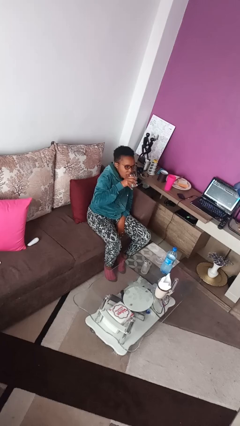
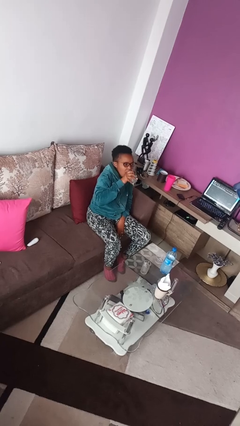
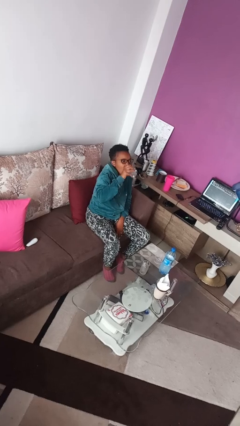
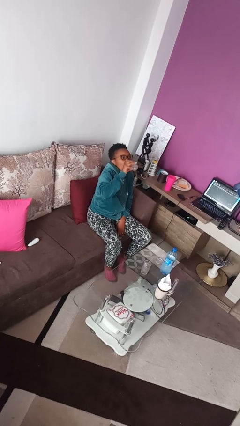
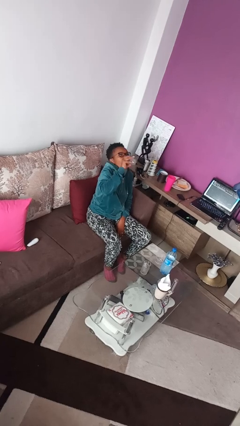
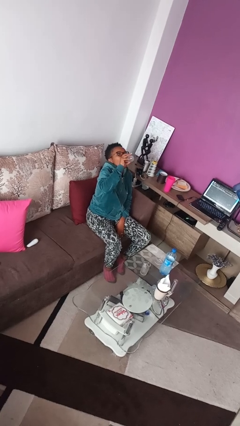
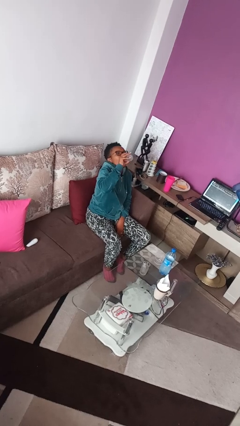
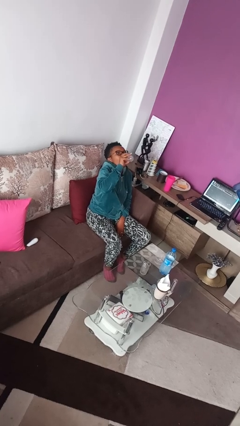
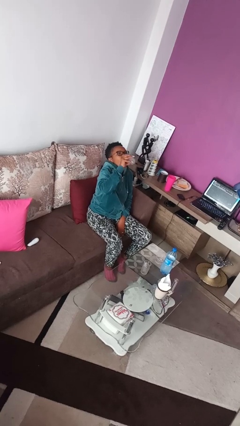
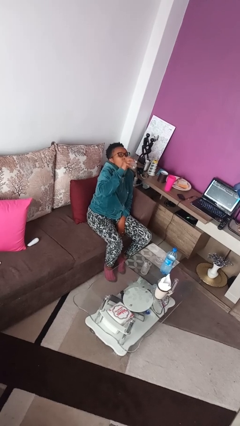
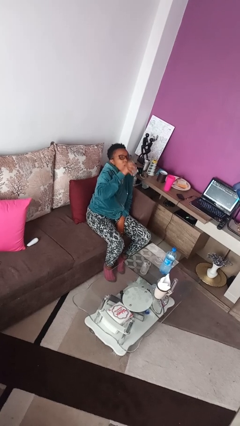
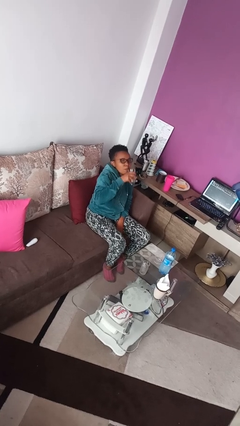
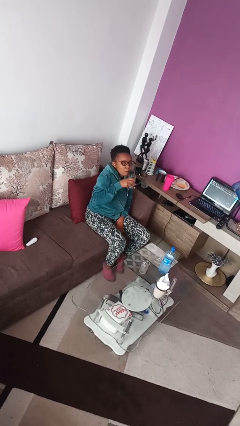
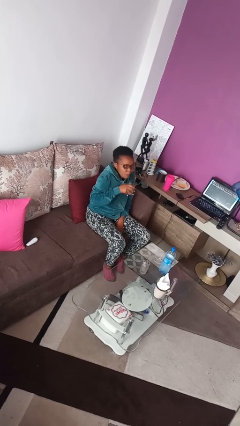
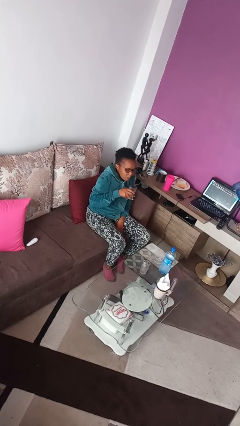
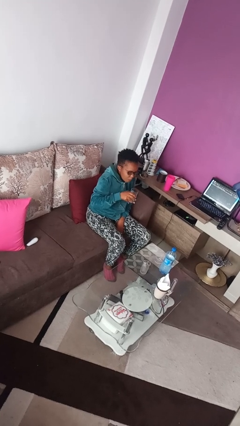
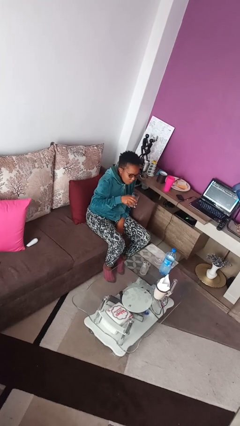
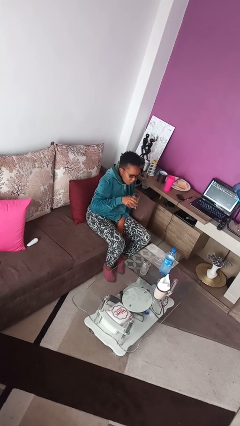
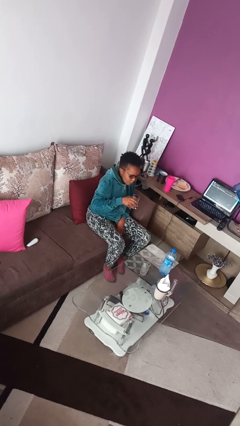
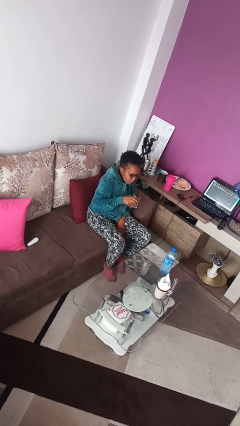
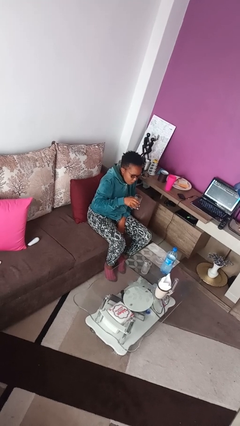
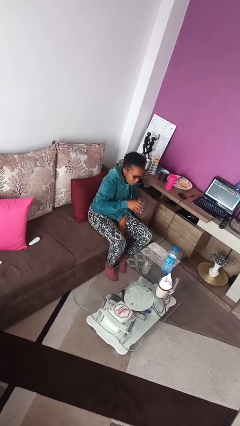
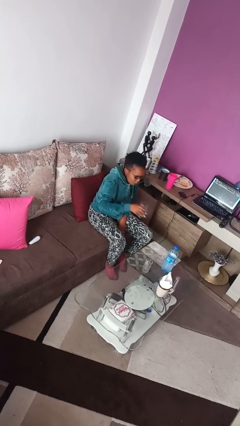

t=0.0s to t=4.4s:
person drinks from shotglass

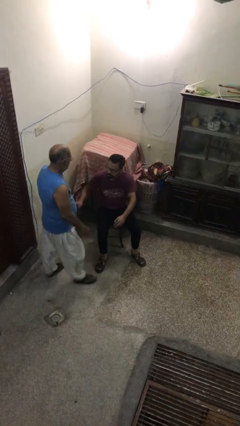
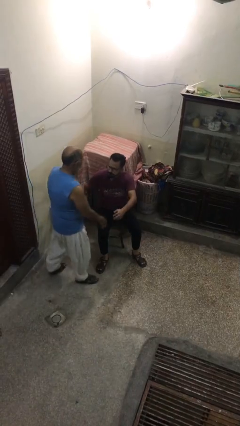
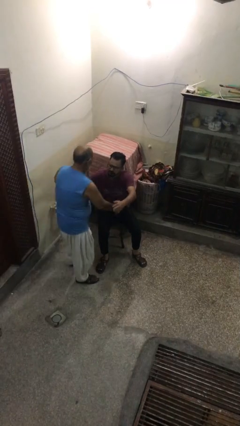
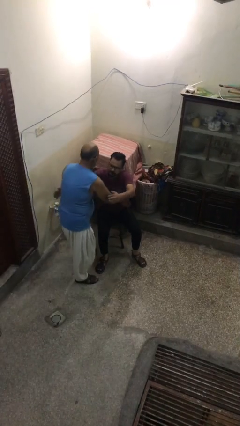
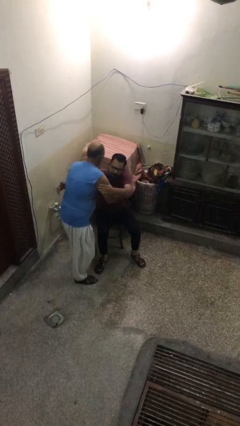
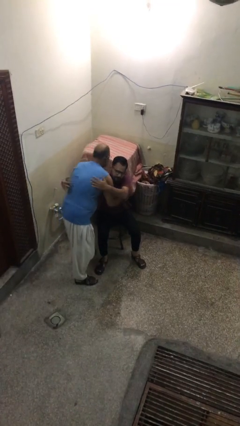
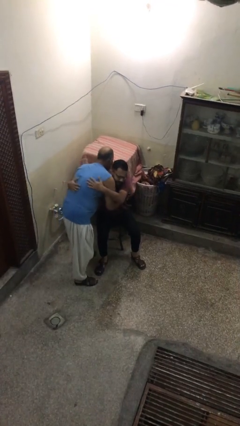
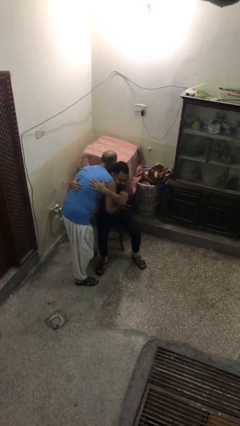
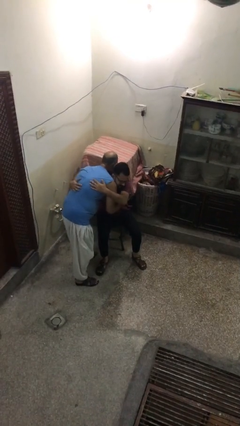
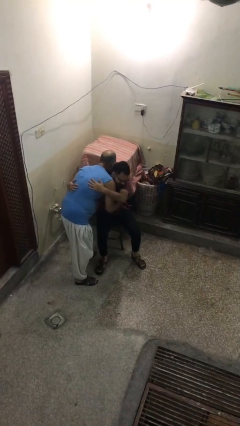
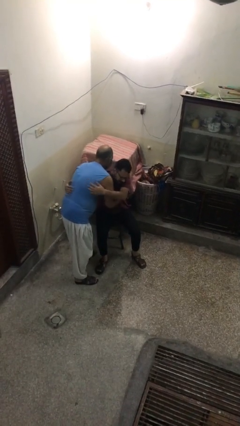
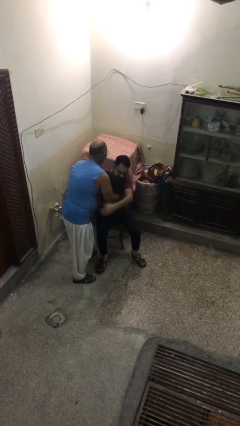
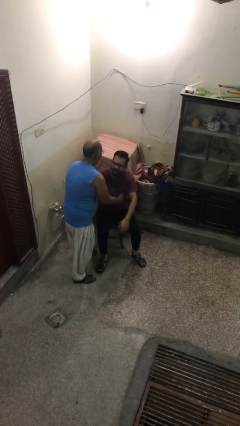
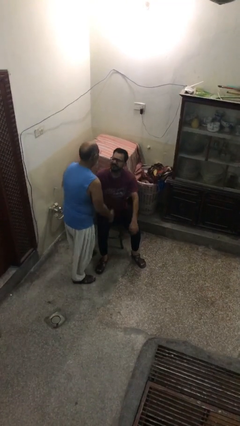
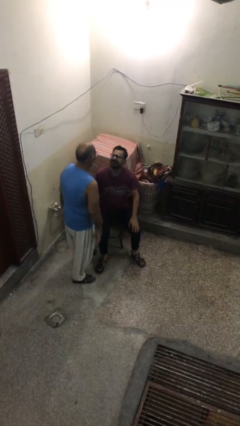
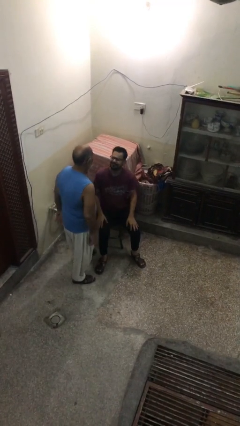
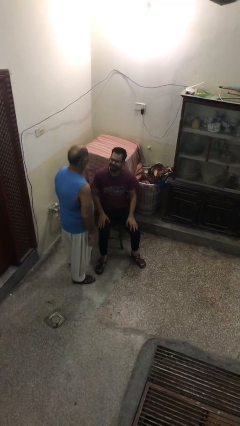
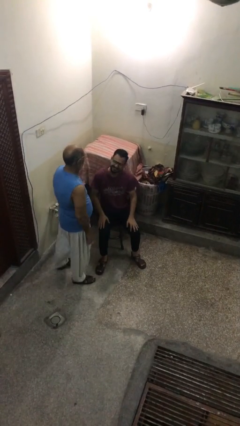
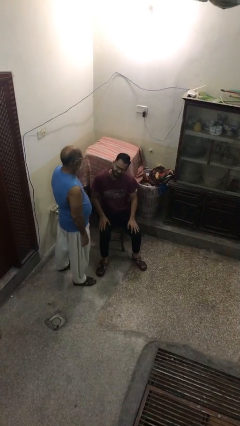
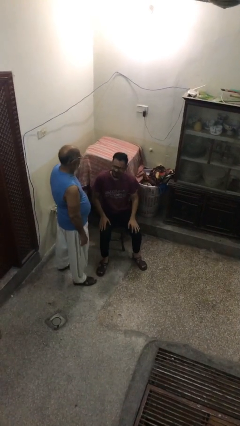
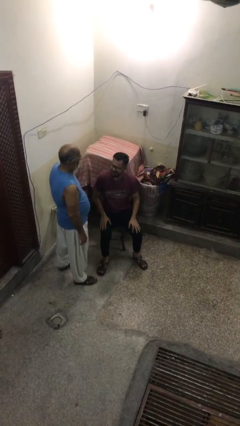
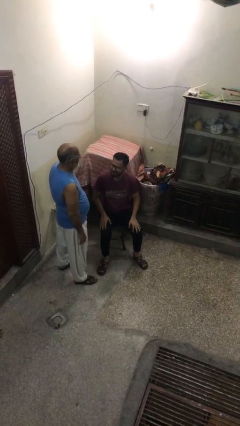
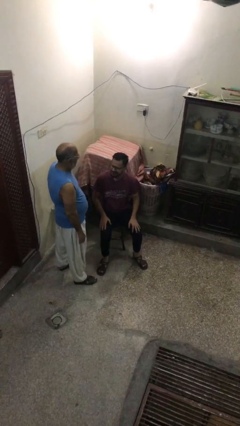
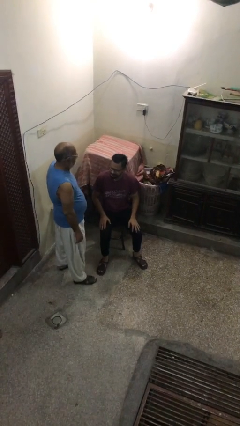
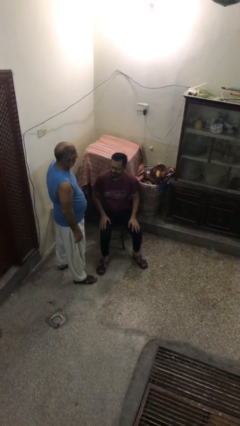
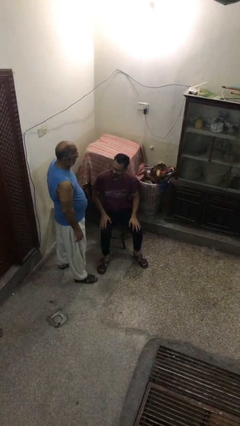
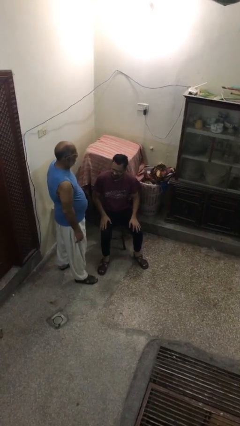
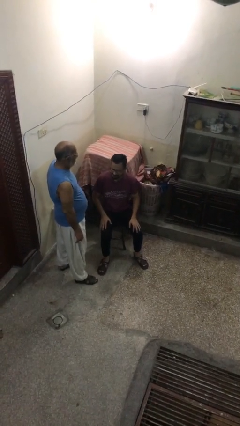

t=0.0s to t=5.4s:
person embraces person

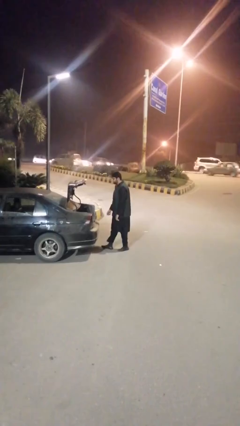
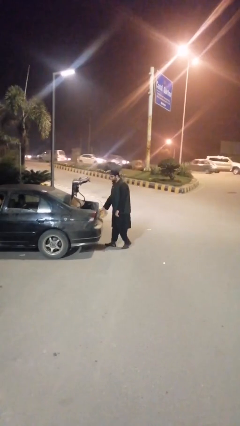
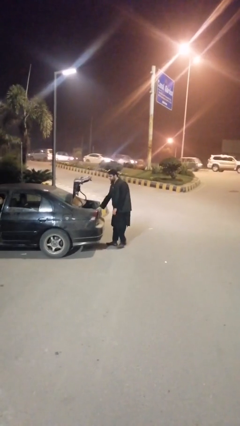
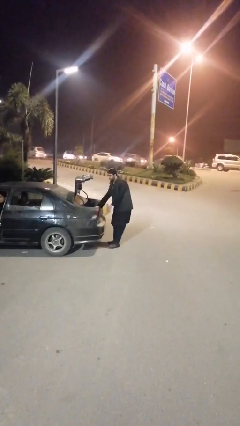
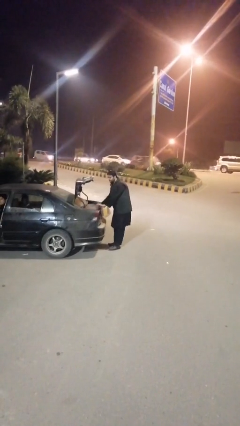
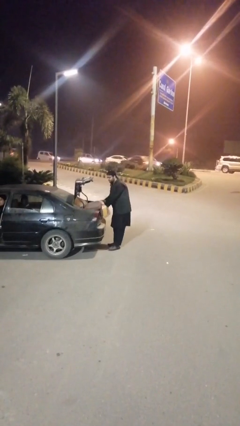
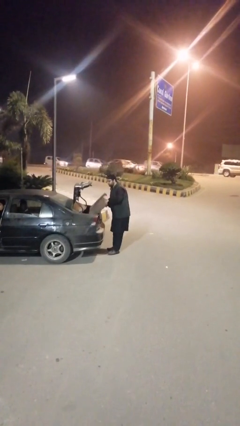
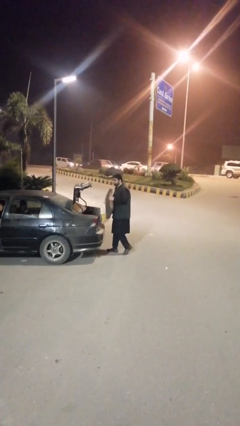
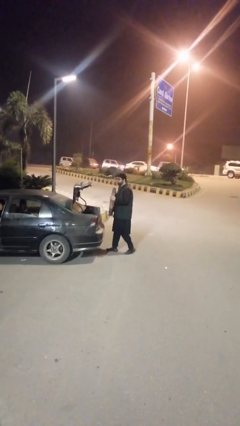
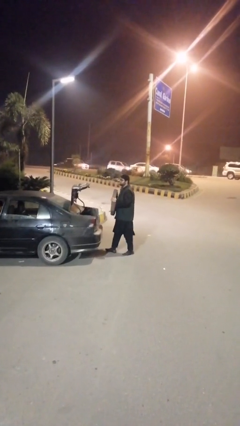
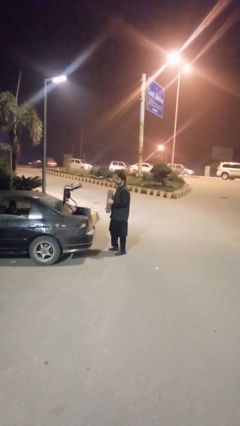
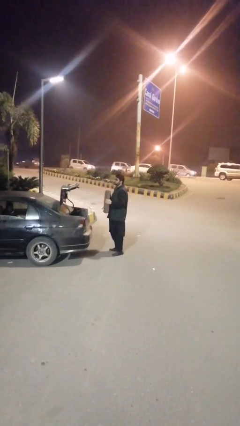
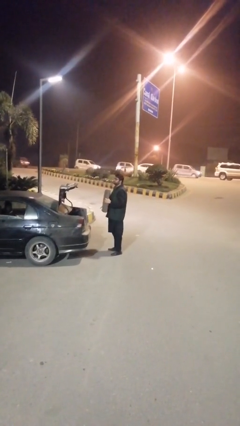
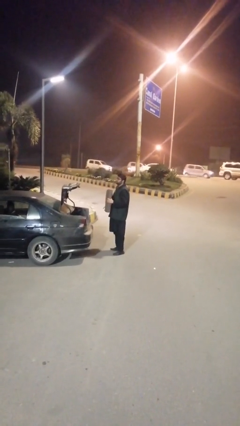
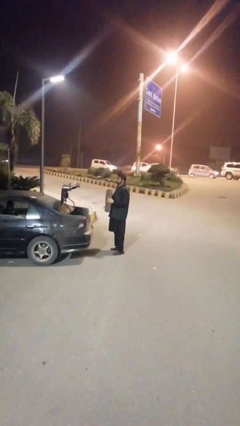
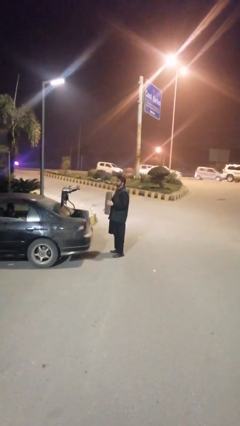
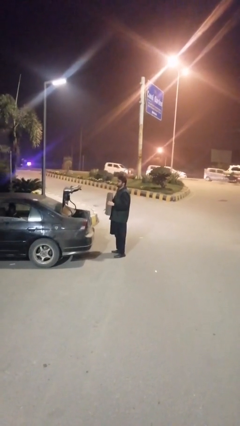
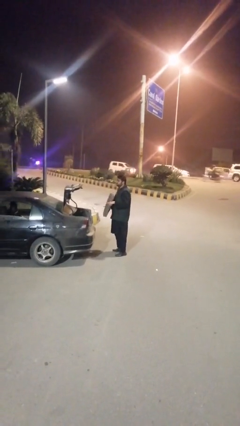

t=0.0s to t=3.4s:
person unloads car

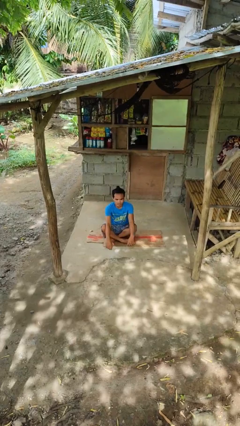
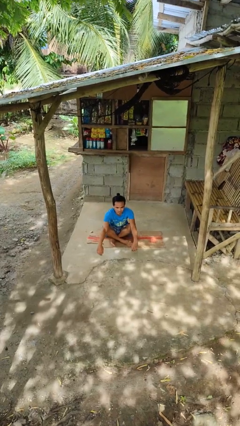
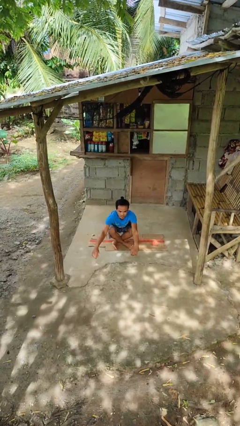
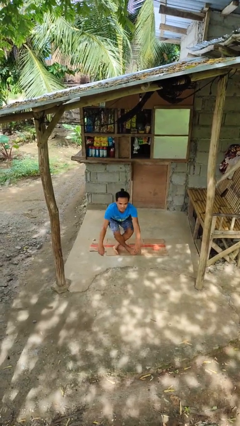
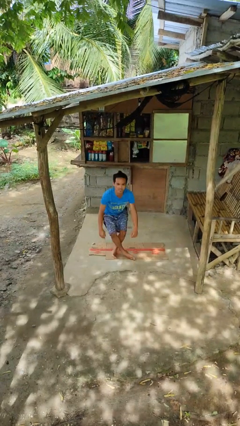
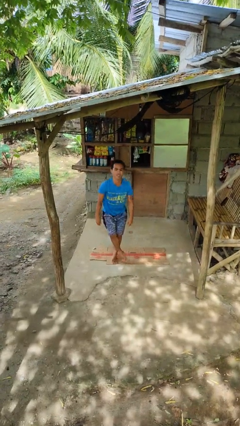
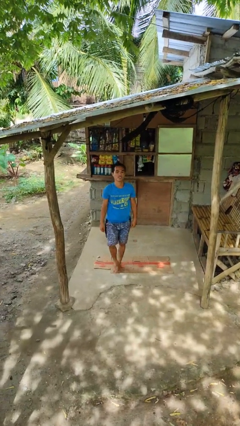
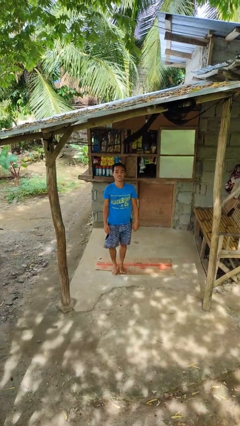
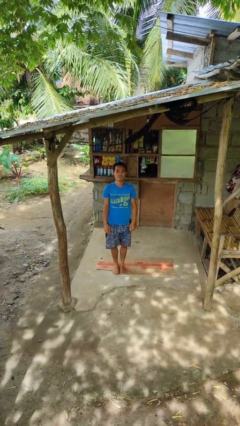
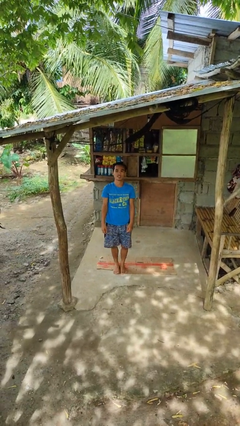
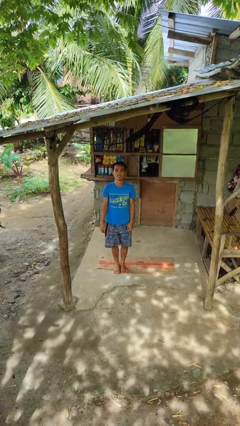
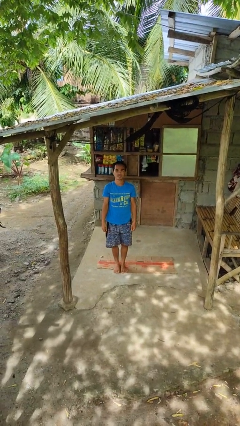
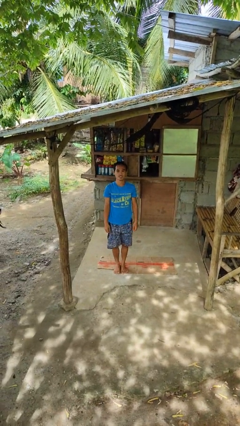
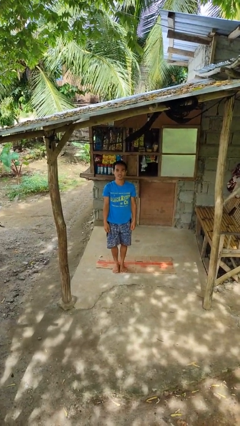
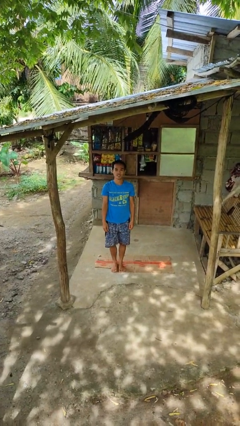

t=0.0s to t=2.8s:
person stands up from floor

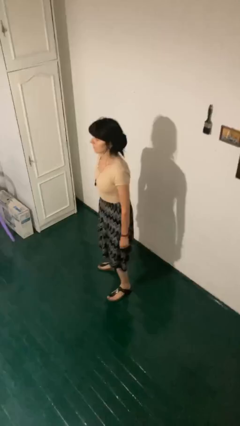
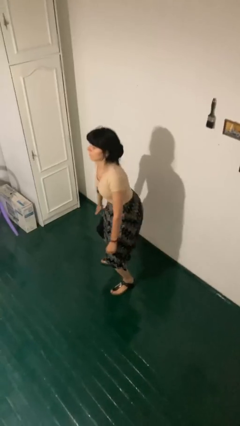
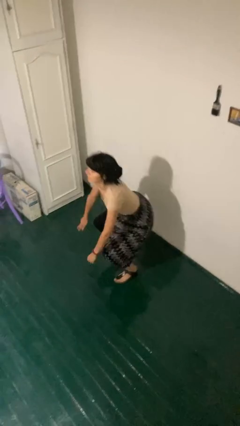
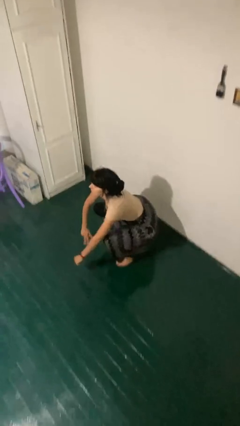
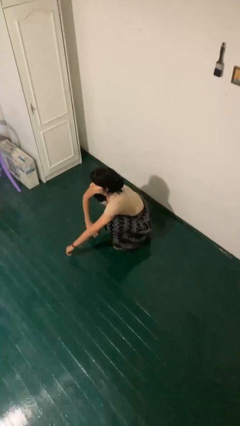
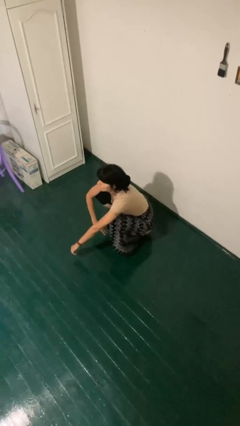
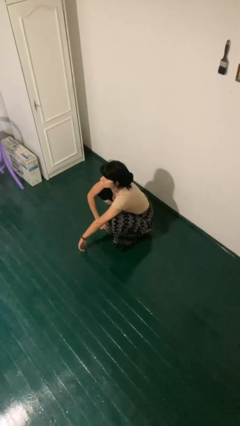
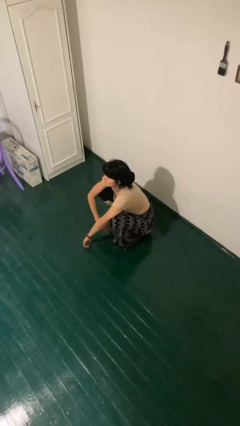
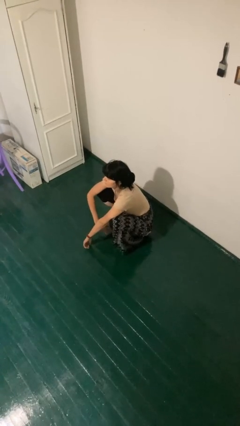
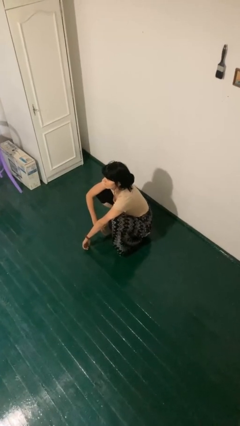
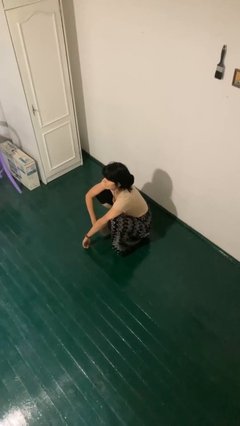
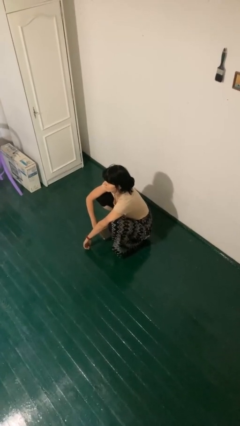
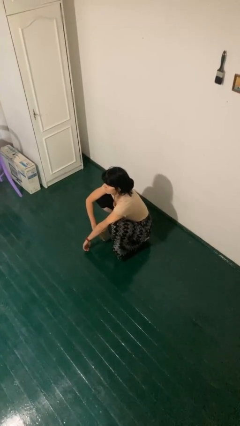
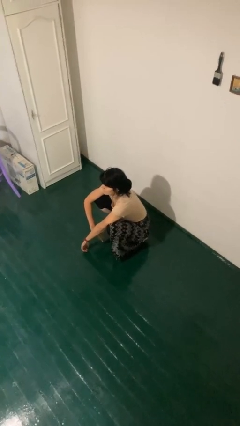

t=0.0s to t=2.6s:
person squats
